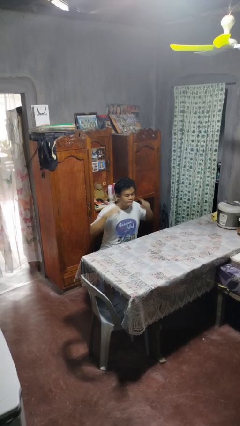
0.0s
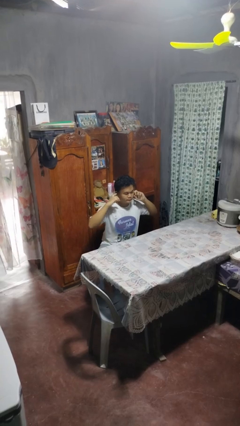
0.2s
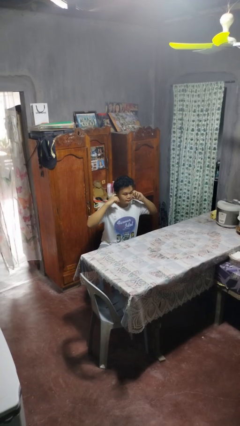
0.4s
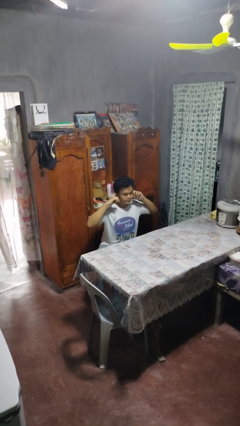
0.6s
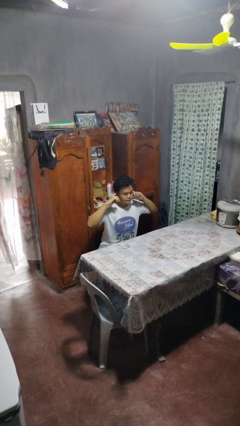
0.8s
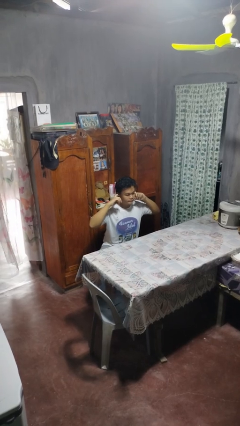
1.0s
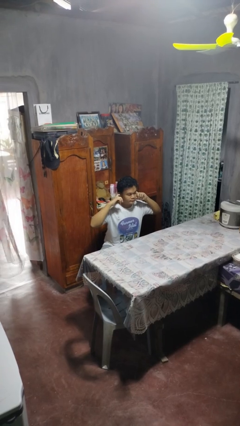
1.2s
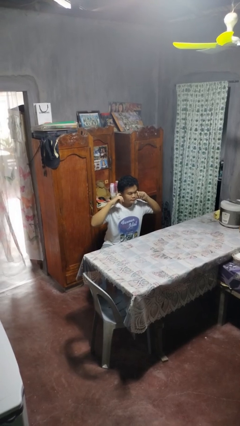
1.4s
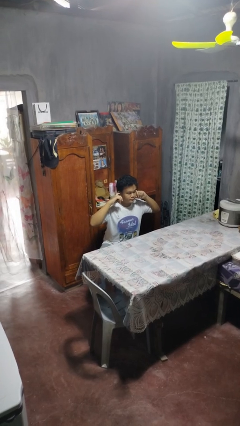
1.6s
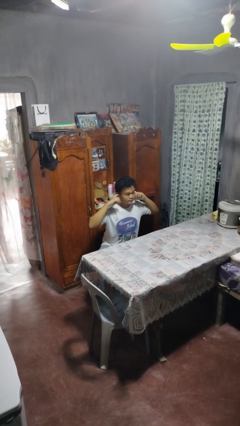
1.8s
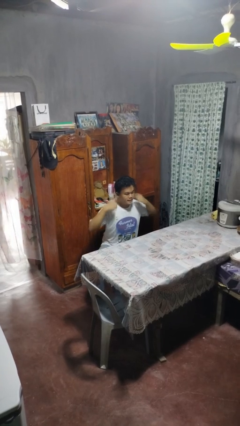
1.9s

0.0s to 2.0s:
person puts fingers in ear

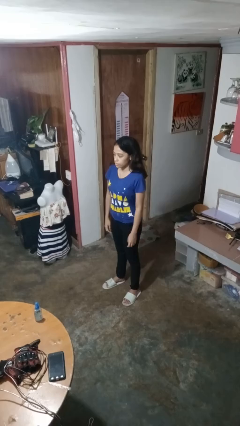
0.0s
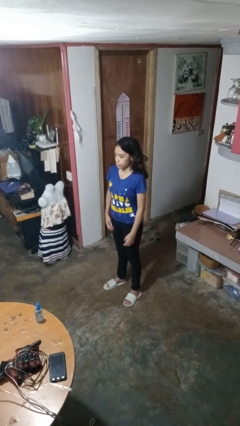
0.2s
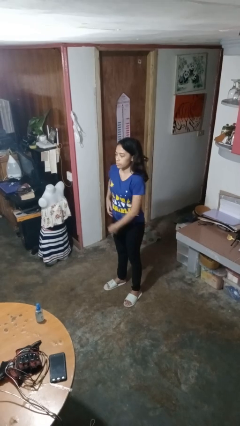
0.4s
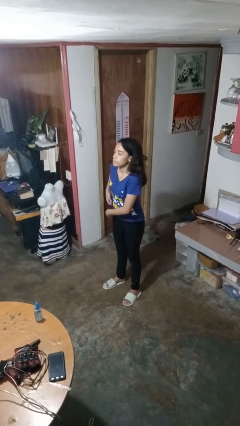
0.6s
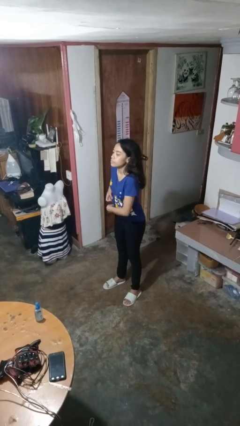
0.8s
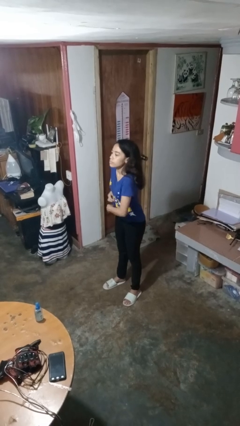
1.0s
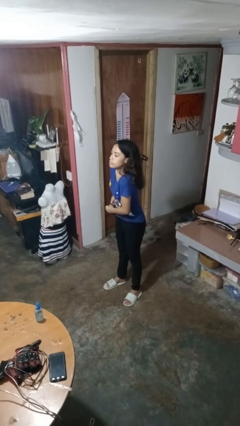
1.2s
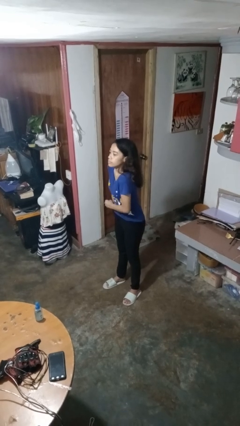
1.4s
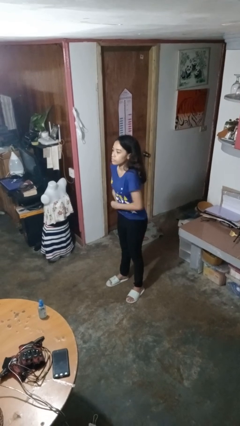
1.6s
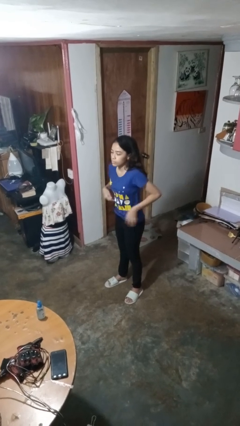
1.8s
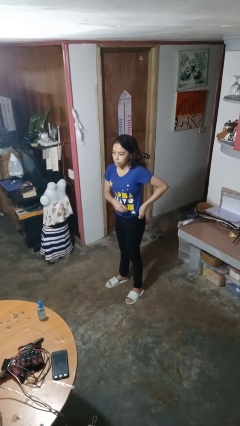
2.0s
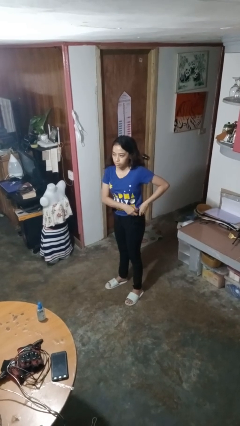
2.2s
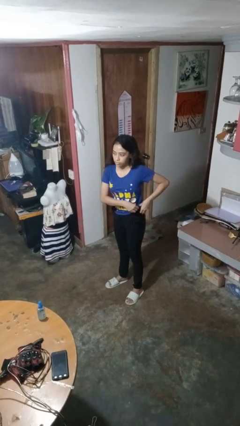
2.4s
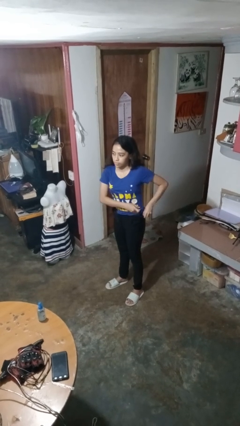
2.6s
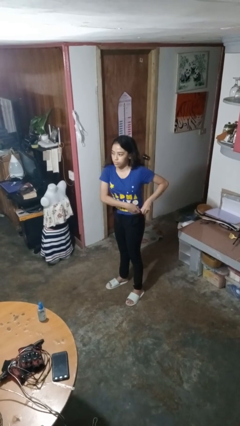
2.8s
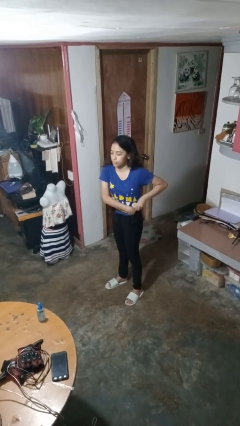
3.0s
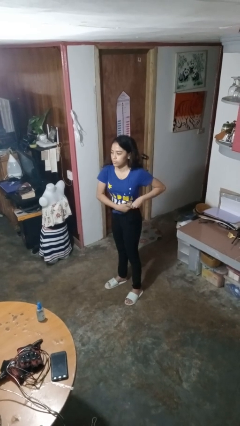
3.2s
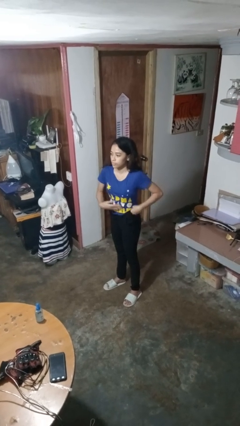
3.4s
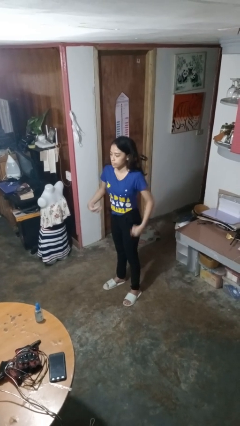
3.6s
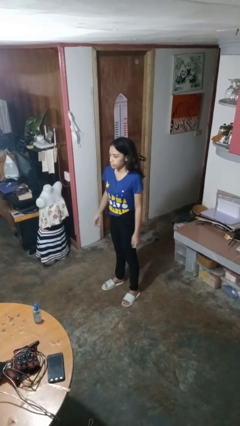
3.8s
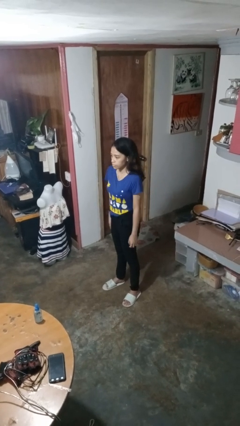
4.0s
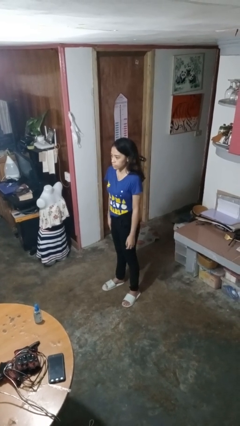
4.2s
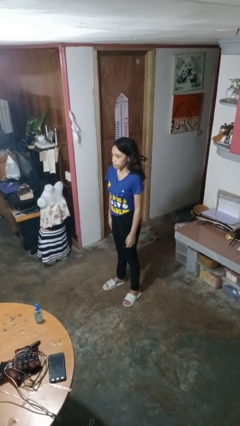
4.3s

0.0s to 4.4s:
person tucks in shirt

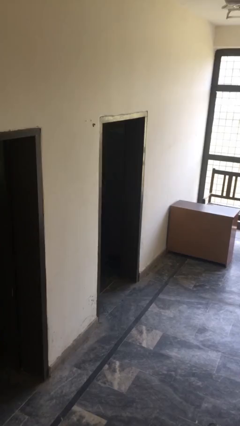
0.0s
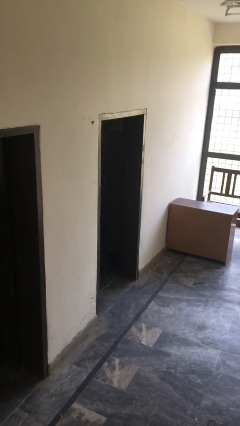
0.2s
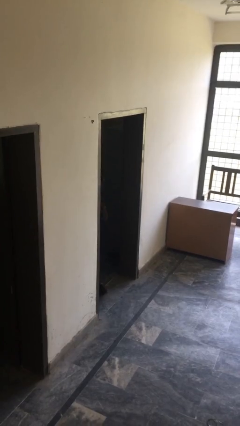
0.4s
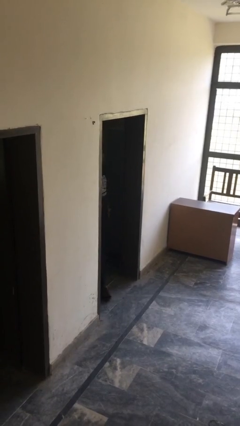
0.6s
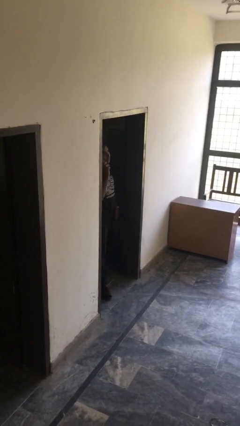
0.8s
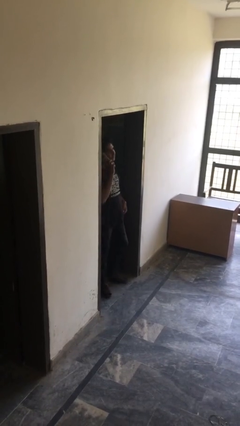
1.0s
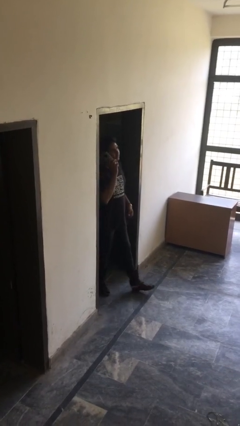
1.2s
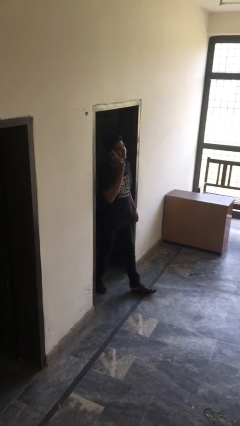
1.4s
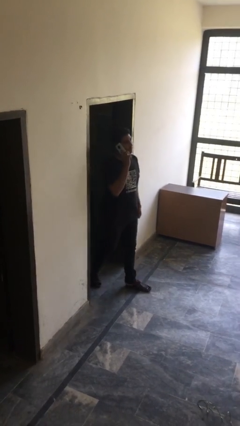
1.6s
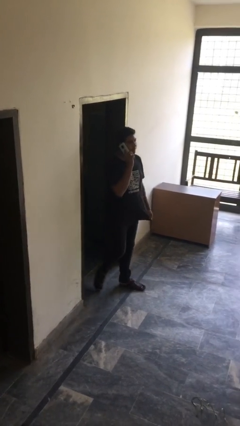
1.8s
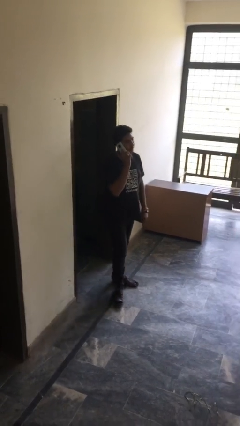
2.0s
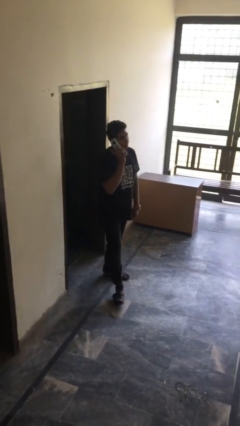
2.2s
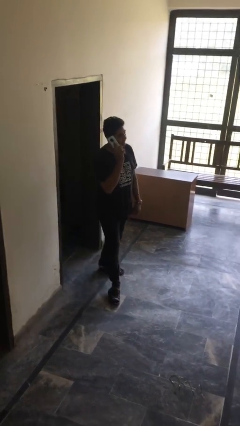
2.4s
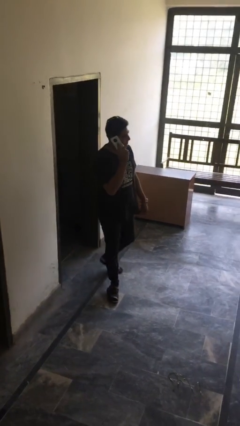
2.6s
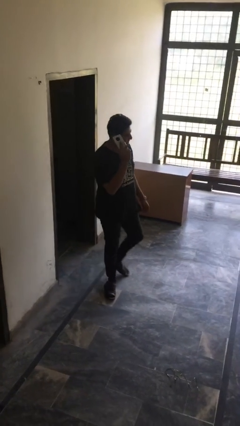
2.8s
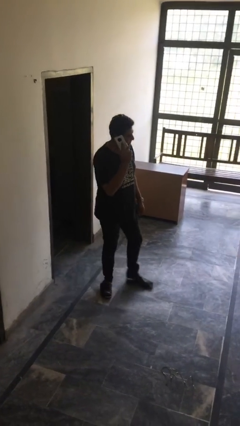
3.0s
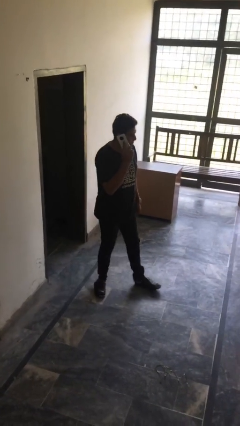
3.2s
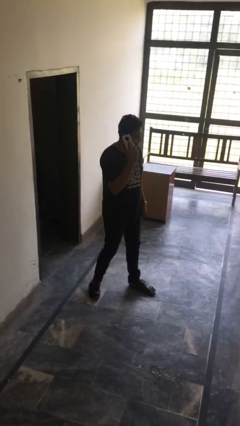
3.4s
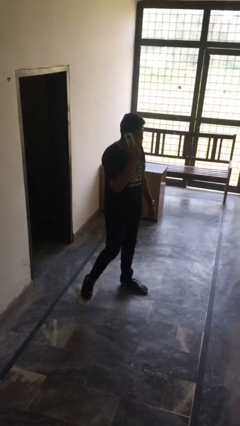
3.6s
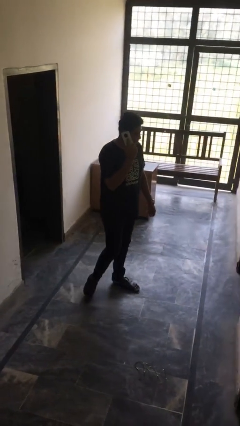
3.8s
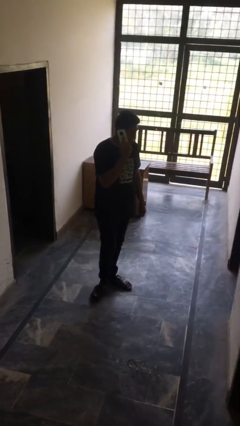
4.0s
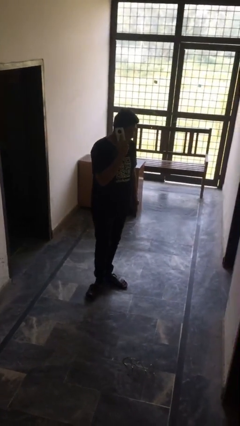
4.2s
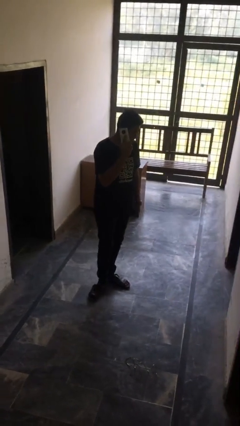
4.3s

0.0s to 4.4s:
person enters scene through structure

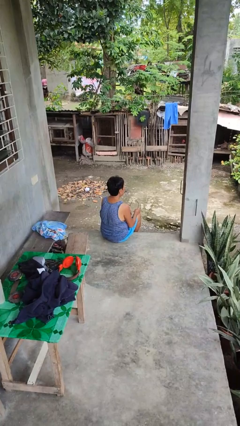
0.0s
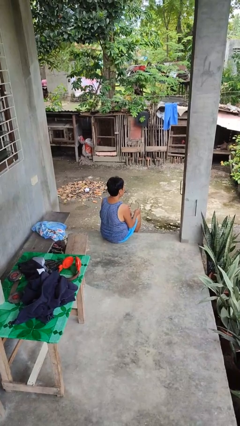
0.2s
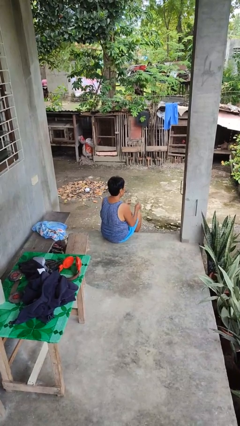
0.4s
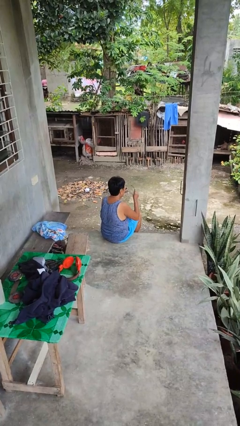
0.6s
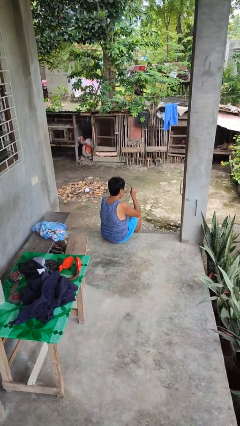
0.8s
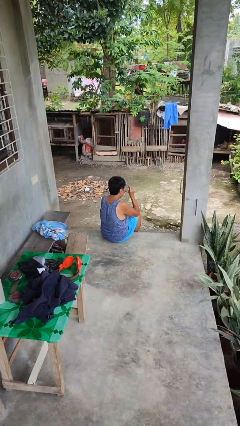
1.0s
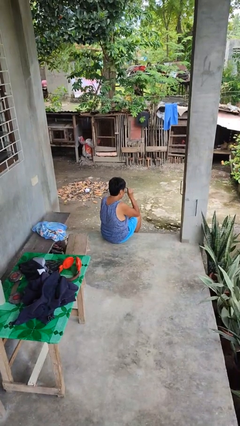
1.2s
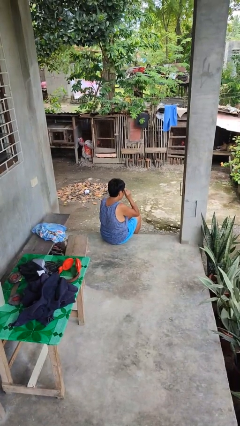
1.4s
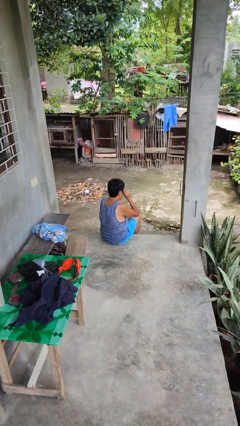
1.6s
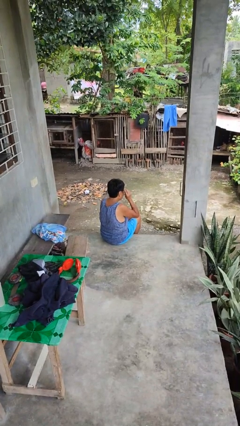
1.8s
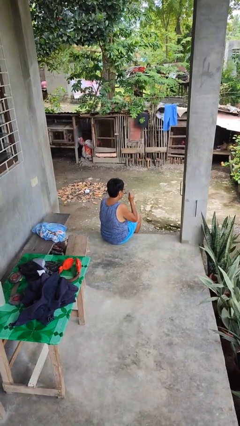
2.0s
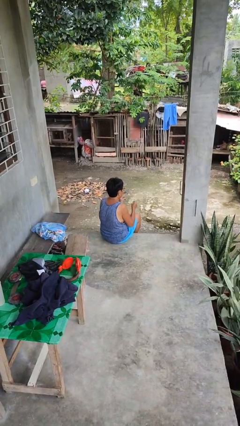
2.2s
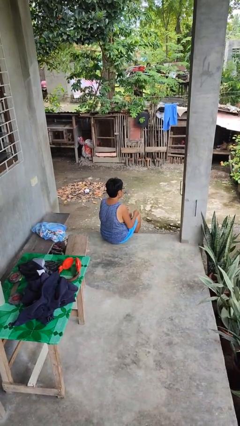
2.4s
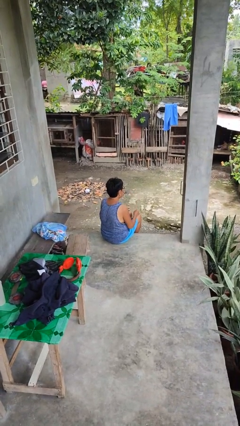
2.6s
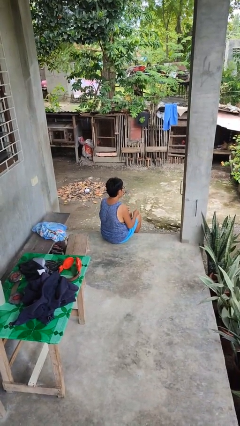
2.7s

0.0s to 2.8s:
person puts on glasses

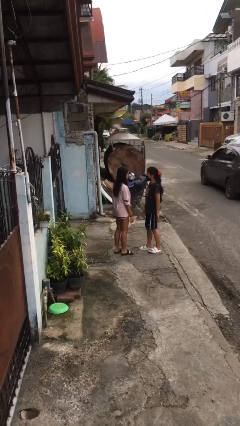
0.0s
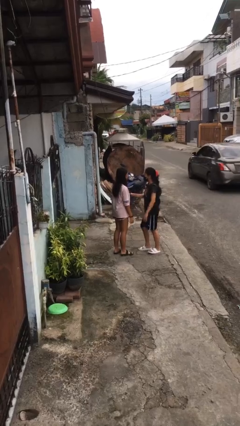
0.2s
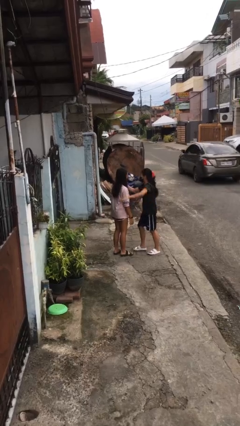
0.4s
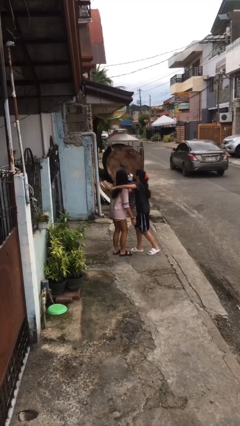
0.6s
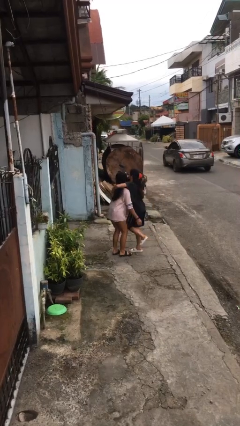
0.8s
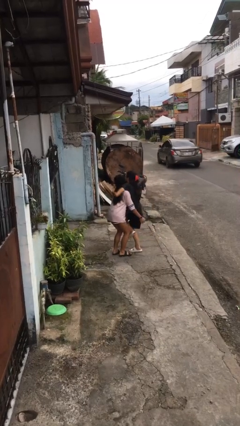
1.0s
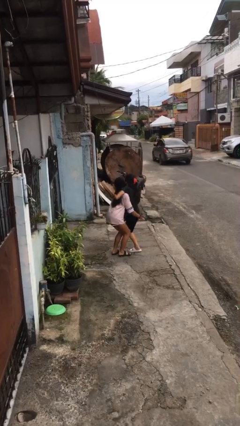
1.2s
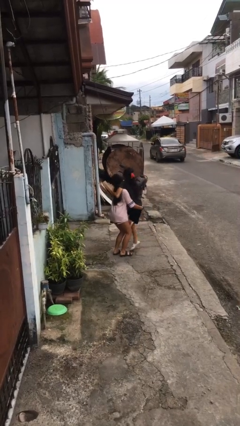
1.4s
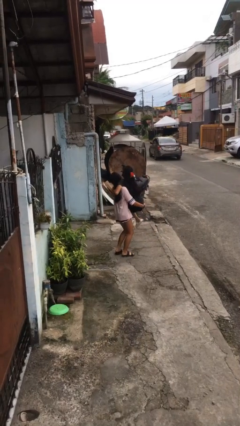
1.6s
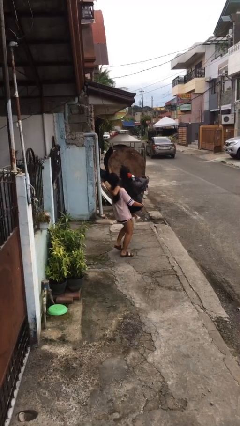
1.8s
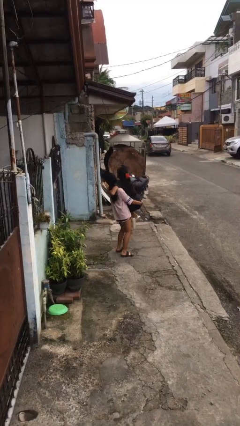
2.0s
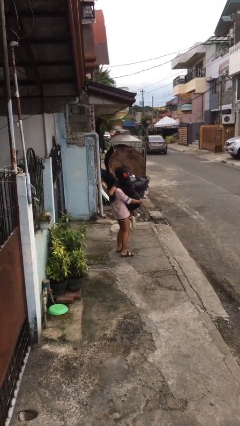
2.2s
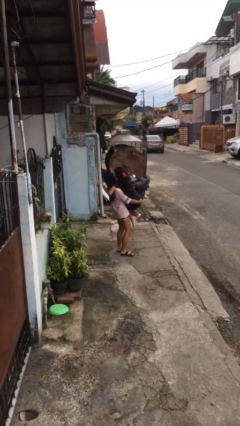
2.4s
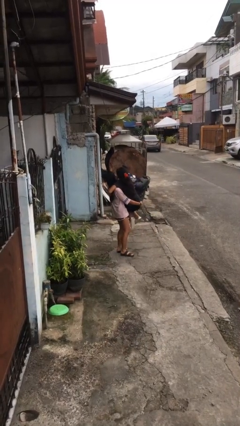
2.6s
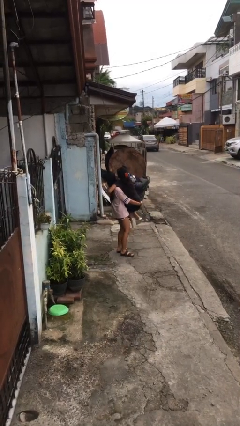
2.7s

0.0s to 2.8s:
person picks up person

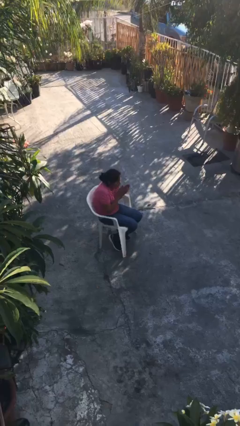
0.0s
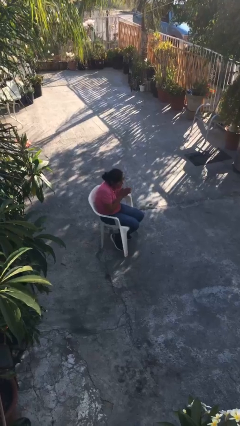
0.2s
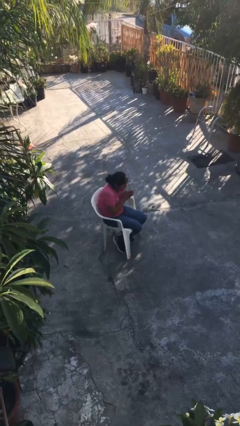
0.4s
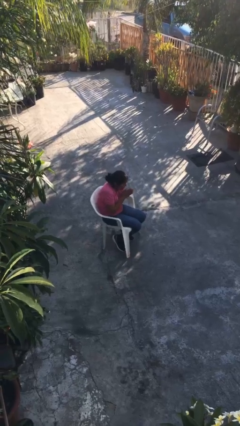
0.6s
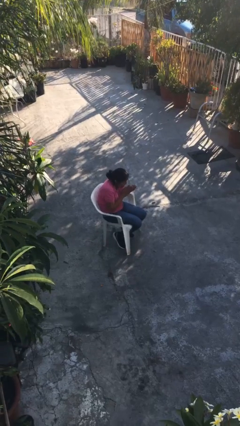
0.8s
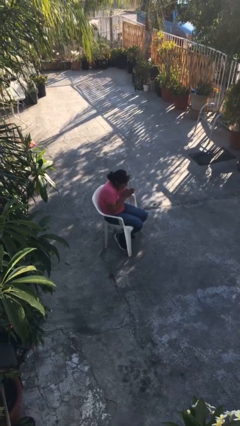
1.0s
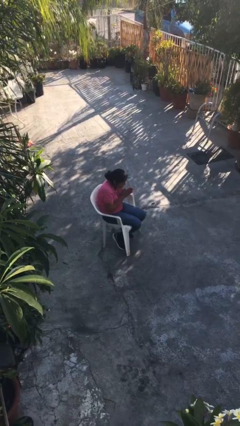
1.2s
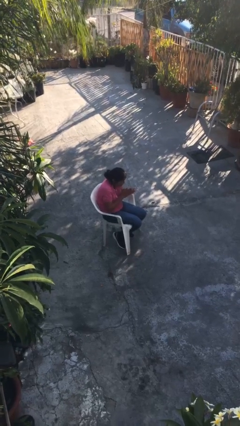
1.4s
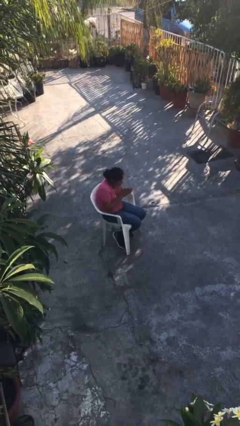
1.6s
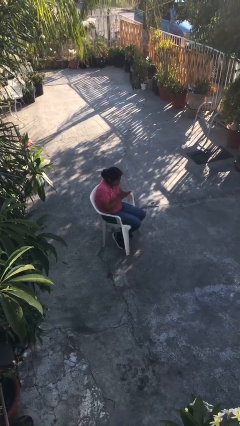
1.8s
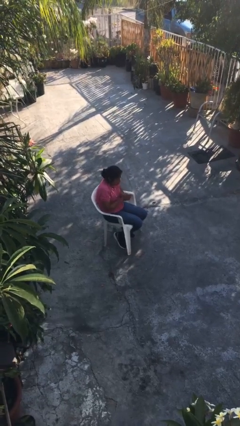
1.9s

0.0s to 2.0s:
person blows into hands
